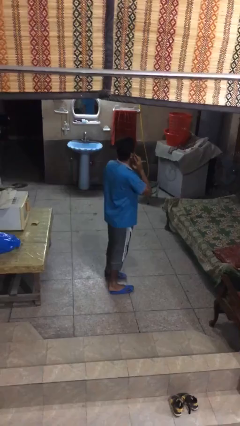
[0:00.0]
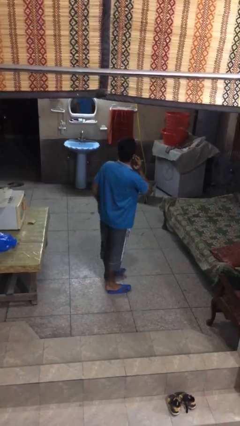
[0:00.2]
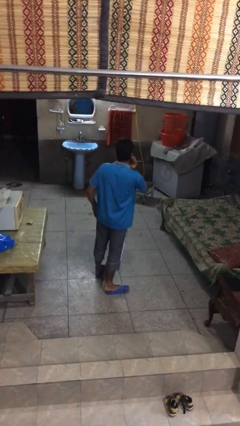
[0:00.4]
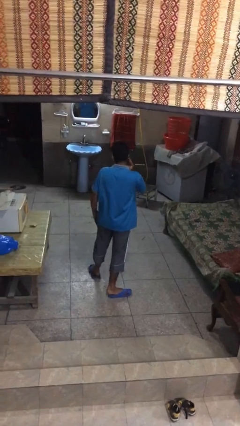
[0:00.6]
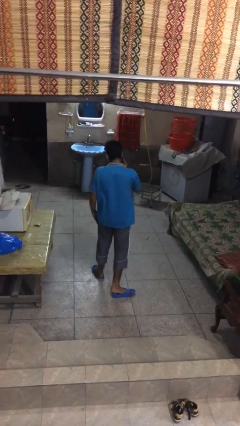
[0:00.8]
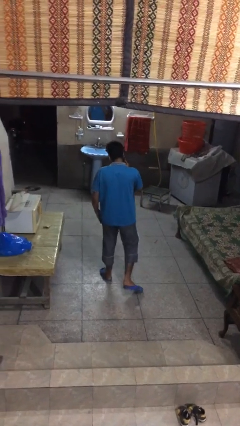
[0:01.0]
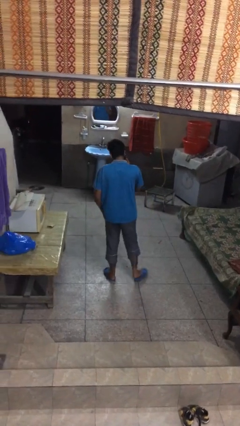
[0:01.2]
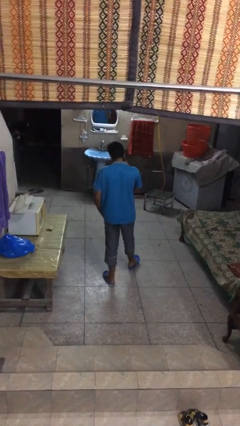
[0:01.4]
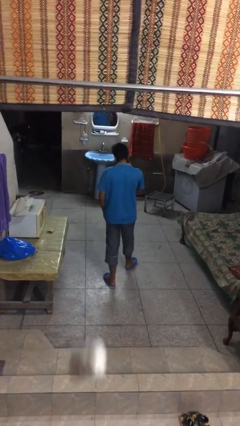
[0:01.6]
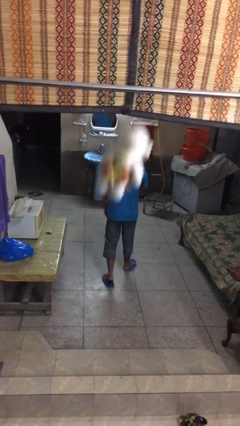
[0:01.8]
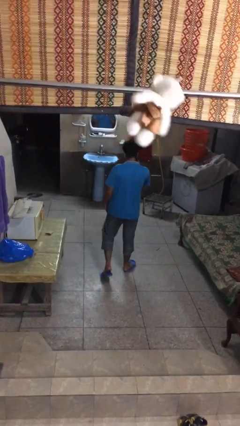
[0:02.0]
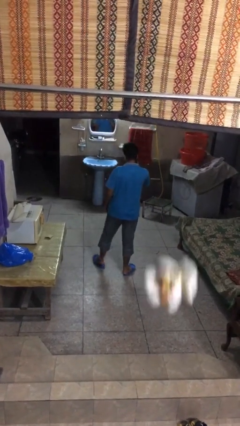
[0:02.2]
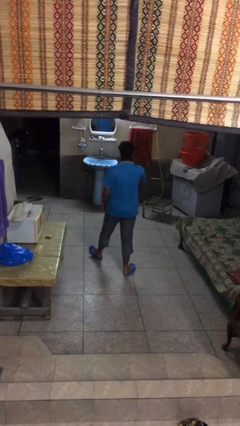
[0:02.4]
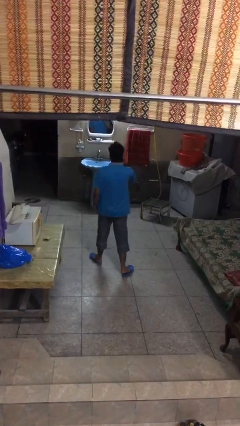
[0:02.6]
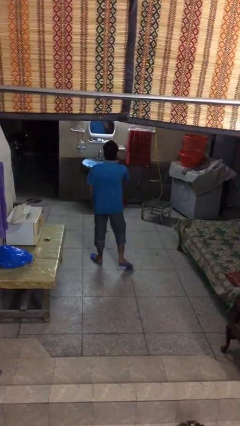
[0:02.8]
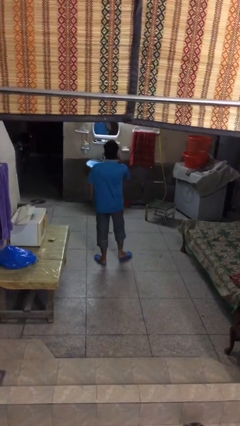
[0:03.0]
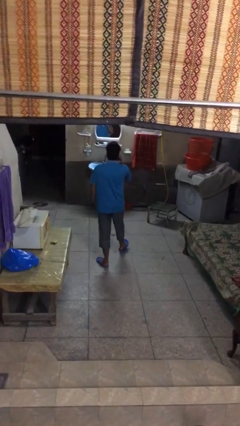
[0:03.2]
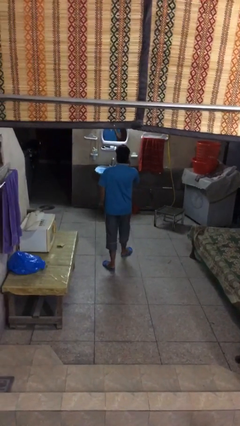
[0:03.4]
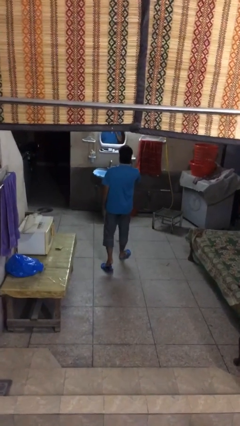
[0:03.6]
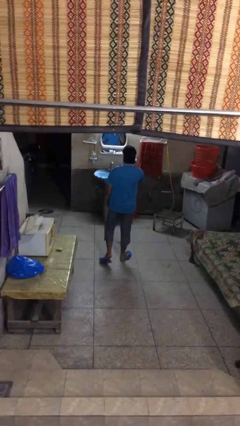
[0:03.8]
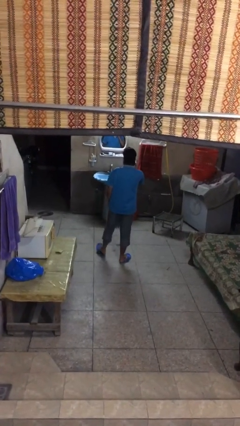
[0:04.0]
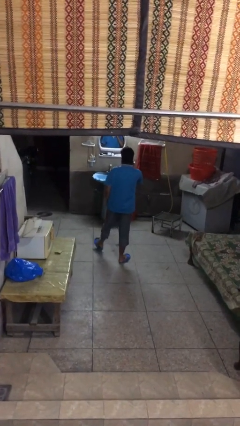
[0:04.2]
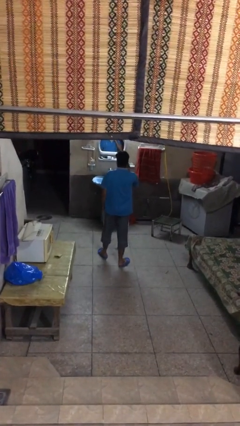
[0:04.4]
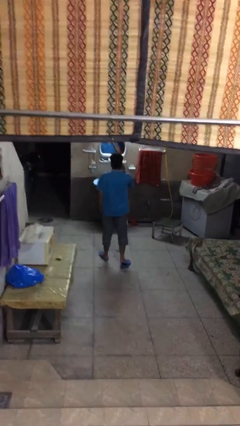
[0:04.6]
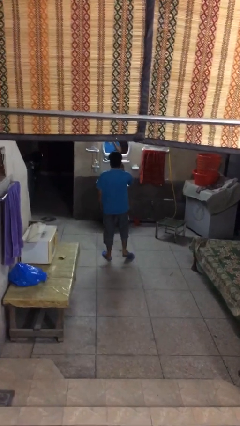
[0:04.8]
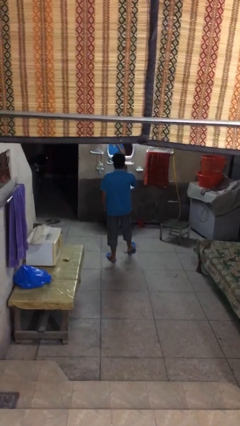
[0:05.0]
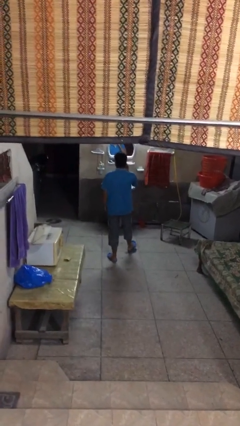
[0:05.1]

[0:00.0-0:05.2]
person talks on phone

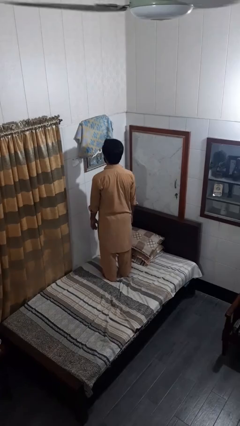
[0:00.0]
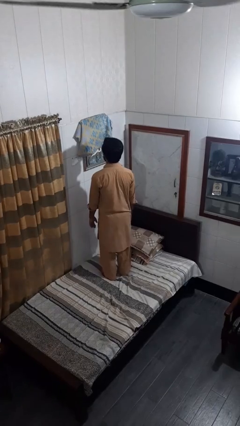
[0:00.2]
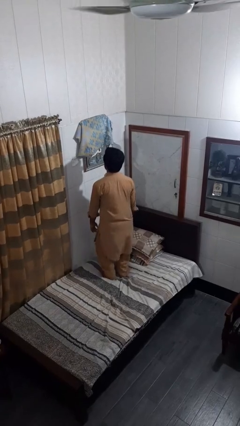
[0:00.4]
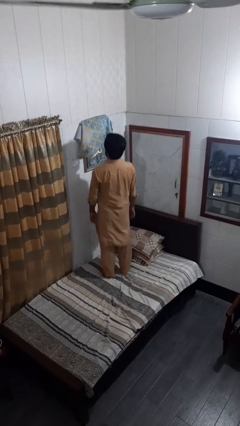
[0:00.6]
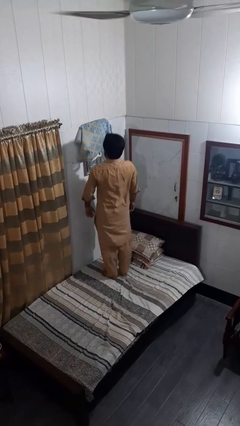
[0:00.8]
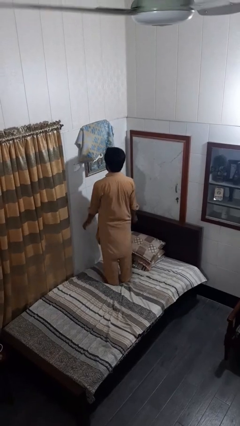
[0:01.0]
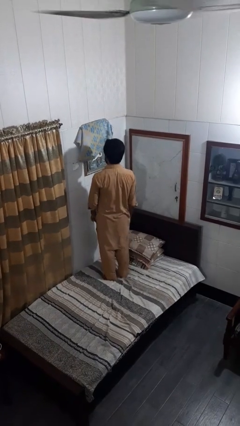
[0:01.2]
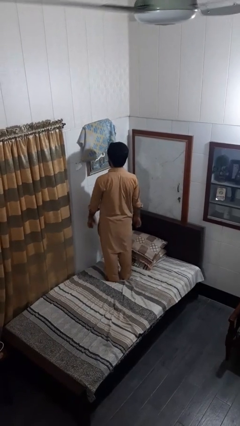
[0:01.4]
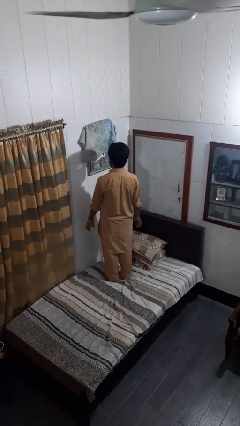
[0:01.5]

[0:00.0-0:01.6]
person jumps on bed

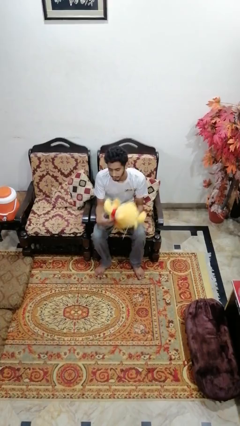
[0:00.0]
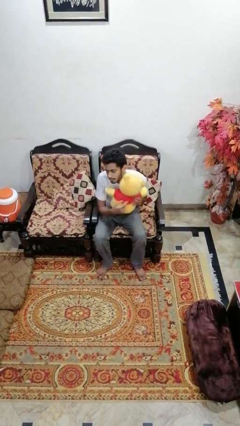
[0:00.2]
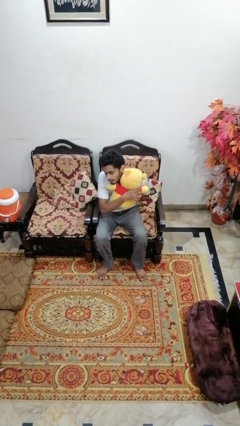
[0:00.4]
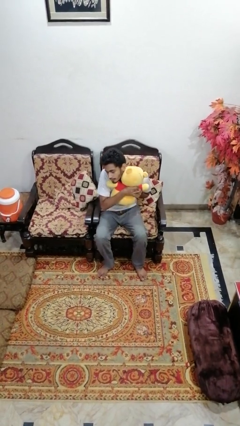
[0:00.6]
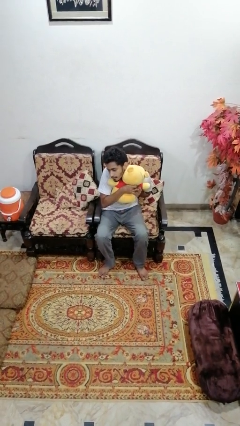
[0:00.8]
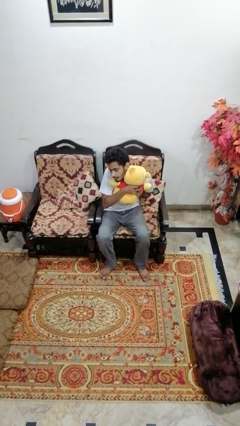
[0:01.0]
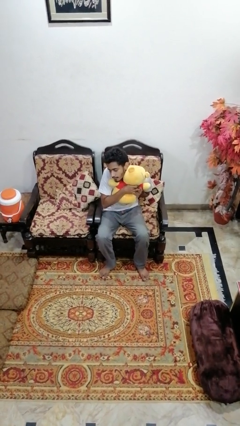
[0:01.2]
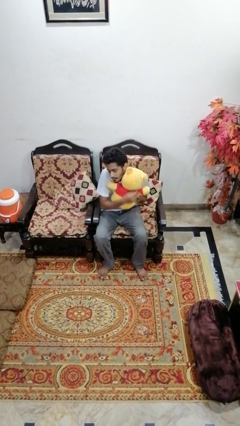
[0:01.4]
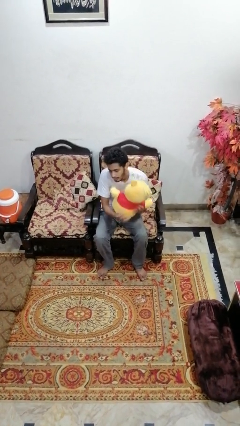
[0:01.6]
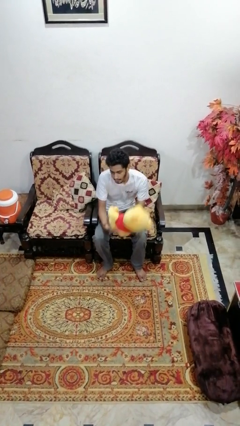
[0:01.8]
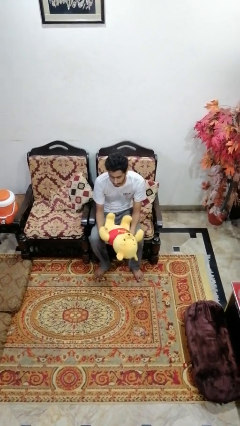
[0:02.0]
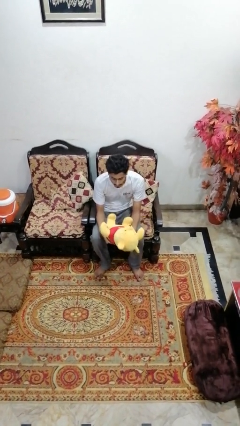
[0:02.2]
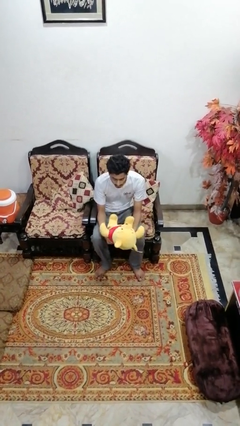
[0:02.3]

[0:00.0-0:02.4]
person hugs stuffed animal

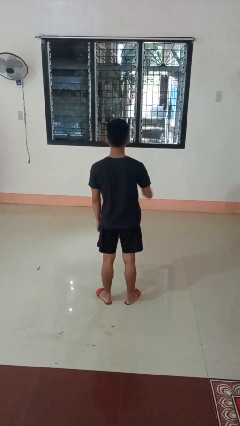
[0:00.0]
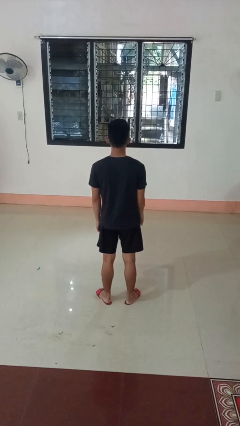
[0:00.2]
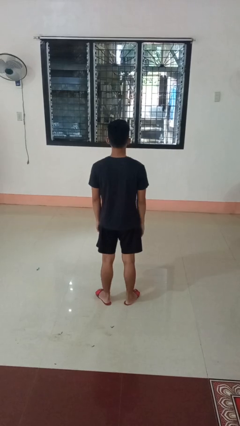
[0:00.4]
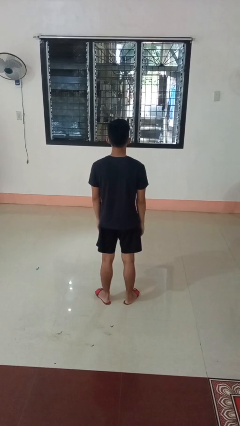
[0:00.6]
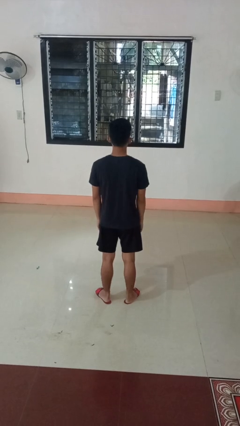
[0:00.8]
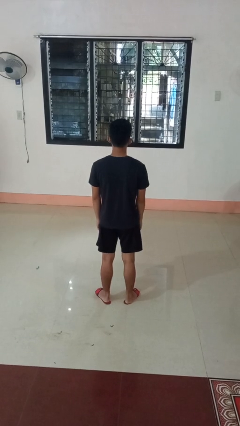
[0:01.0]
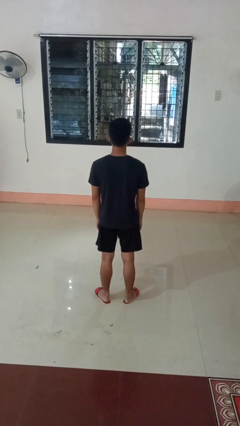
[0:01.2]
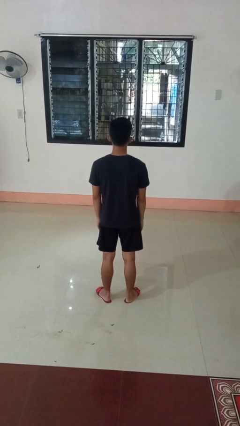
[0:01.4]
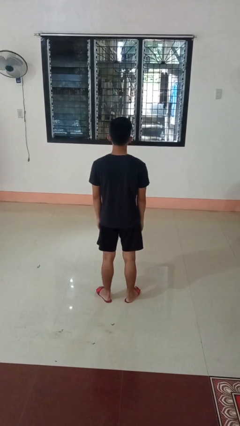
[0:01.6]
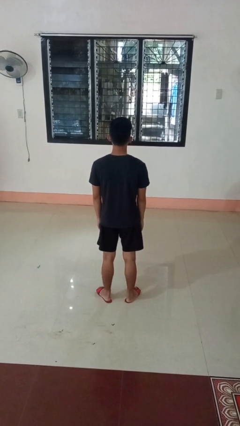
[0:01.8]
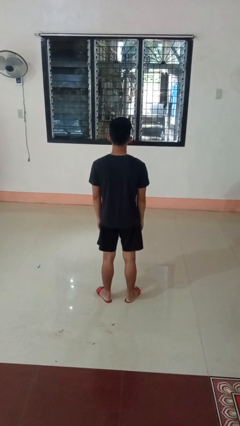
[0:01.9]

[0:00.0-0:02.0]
person gestures lower hand

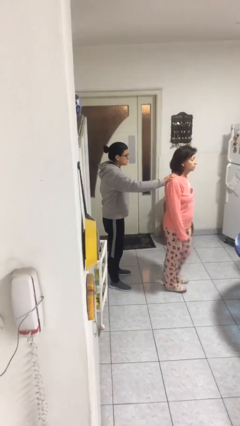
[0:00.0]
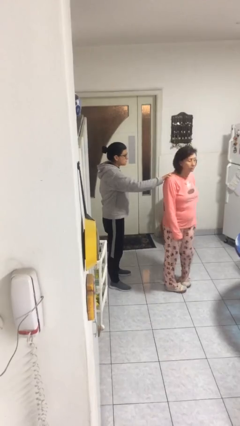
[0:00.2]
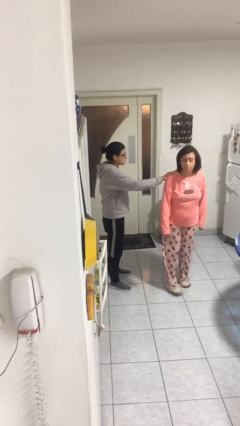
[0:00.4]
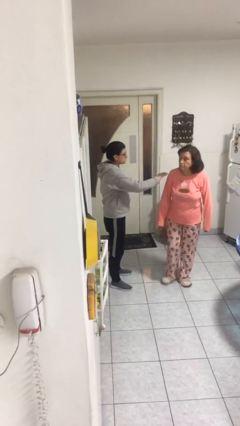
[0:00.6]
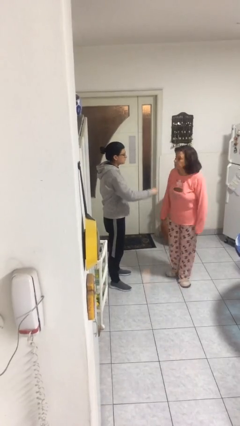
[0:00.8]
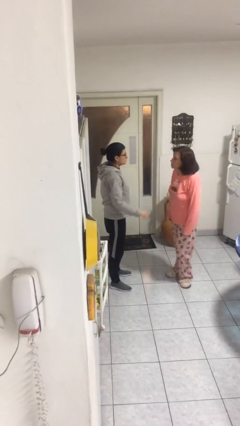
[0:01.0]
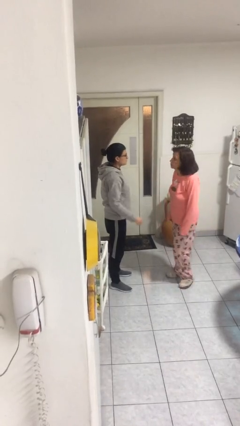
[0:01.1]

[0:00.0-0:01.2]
person spins person around

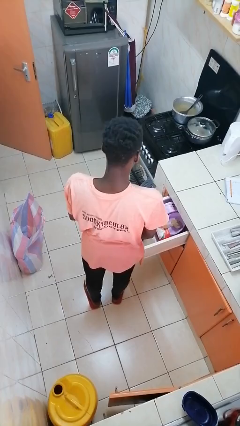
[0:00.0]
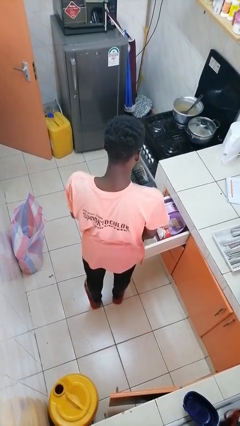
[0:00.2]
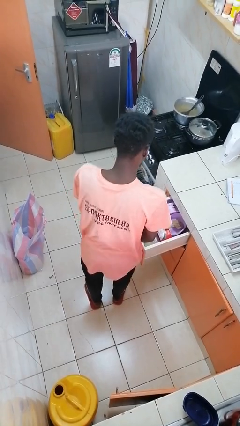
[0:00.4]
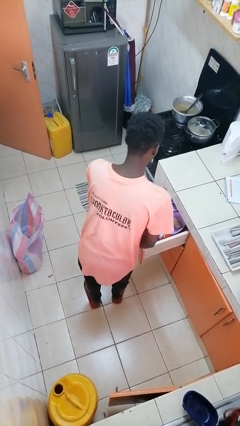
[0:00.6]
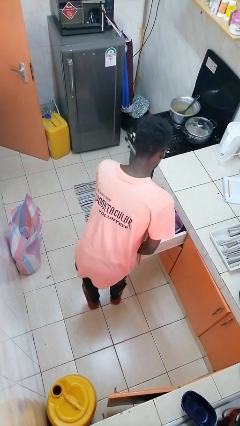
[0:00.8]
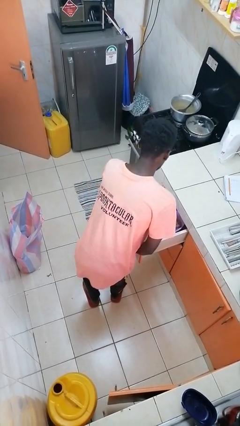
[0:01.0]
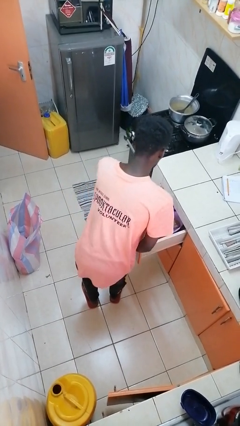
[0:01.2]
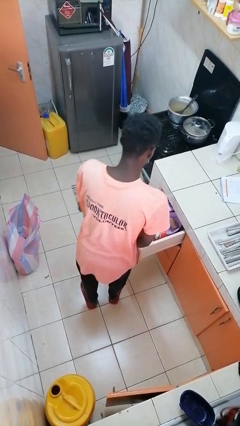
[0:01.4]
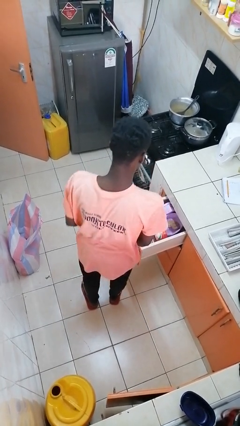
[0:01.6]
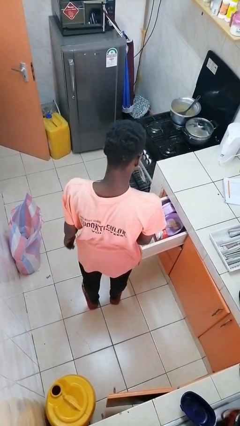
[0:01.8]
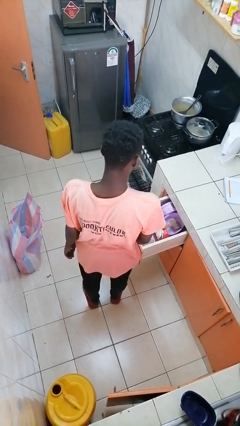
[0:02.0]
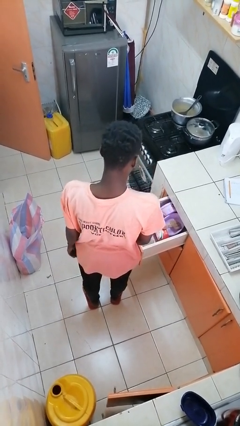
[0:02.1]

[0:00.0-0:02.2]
person puts object into kitchen drawer

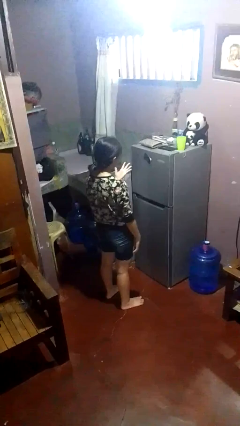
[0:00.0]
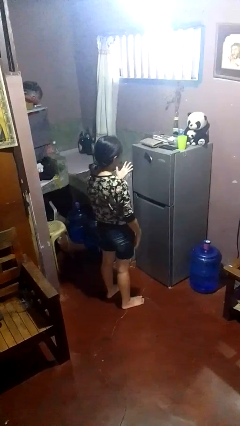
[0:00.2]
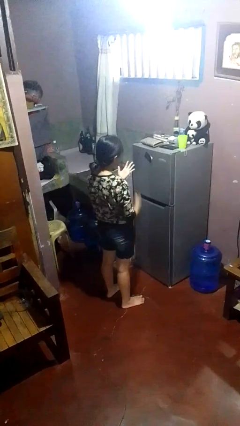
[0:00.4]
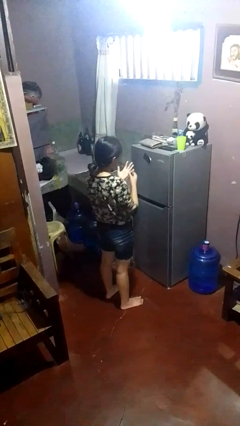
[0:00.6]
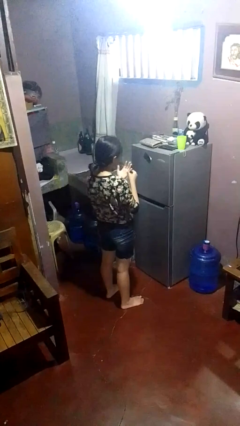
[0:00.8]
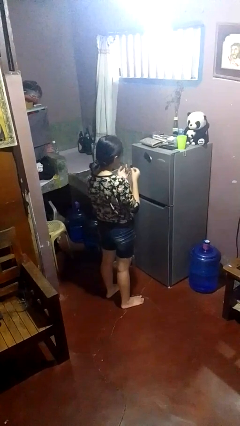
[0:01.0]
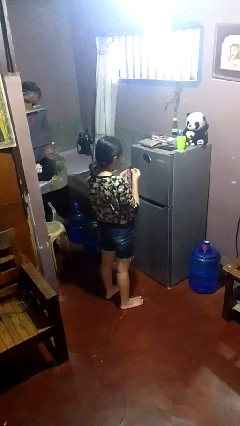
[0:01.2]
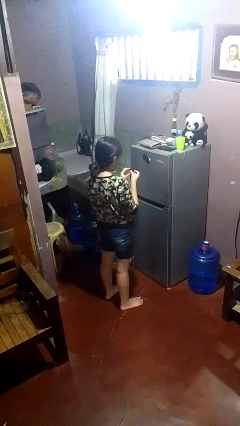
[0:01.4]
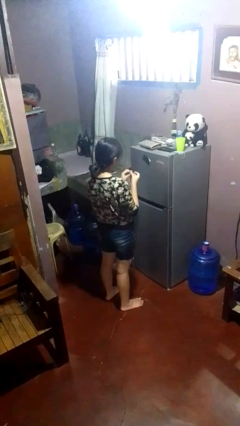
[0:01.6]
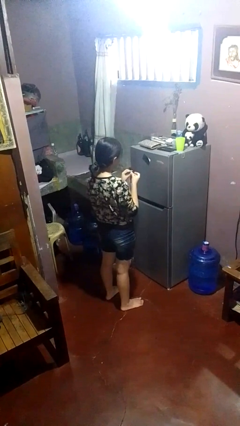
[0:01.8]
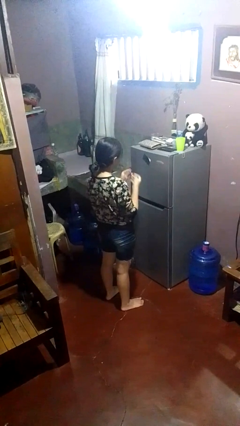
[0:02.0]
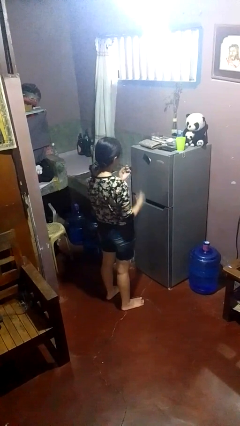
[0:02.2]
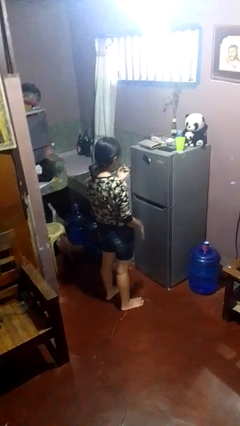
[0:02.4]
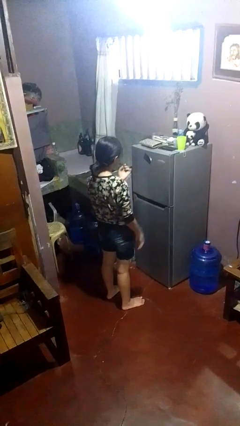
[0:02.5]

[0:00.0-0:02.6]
person takes off ring

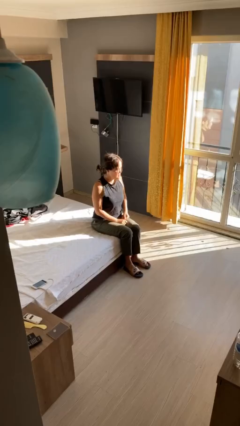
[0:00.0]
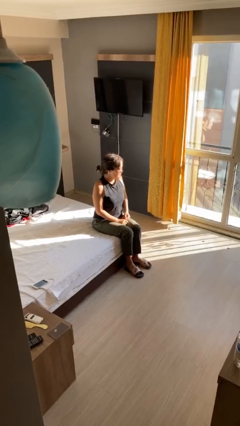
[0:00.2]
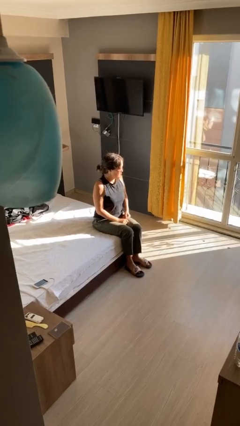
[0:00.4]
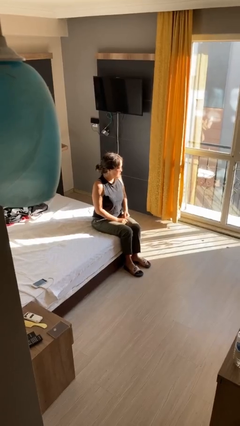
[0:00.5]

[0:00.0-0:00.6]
person shades eyes
